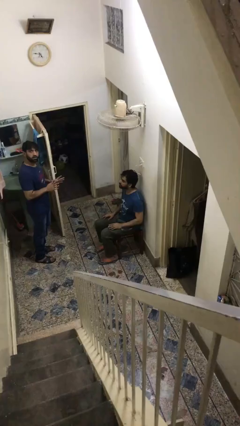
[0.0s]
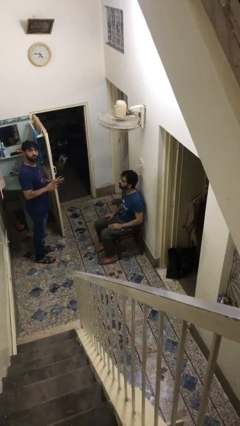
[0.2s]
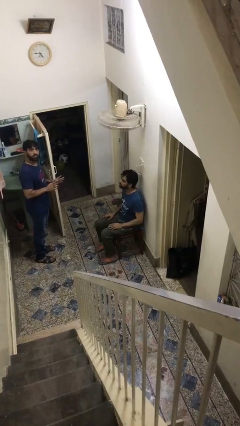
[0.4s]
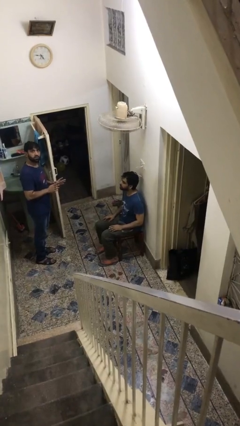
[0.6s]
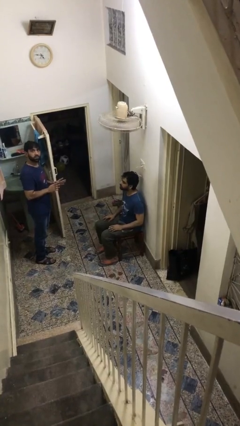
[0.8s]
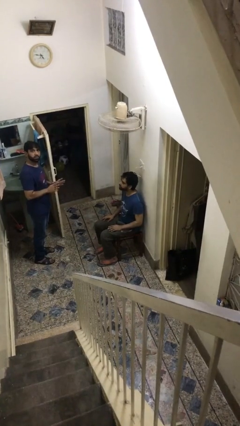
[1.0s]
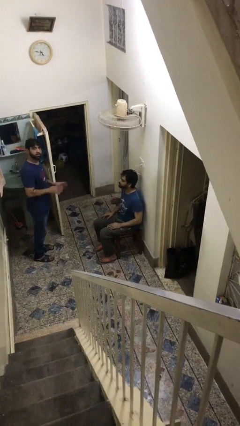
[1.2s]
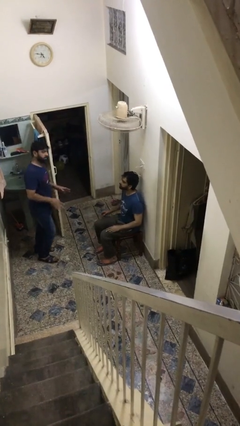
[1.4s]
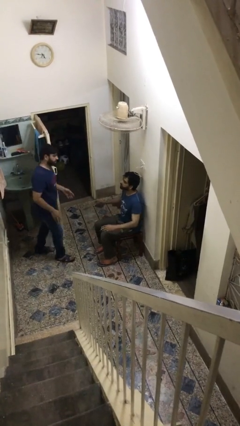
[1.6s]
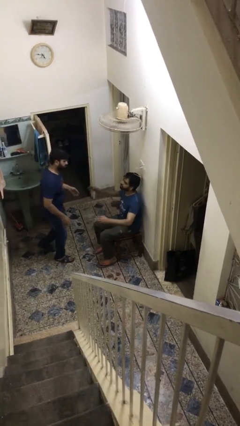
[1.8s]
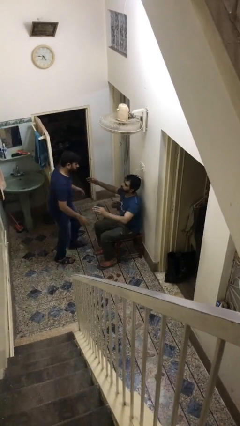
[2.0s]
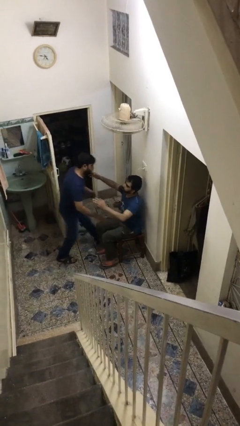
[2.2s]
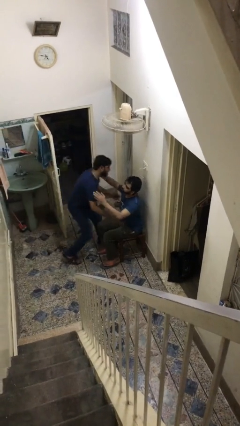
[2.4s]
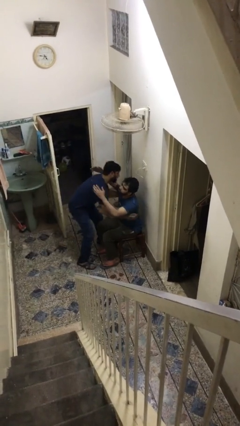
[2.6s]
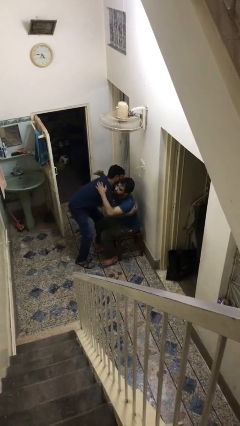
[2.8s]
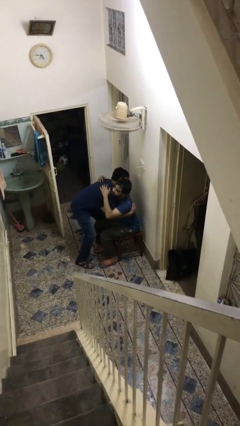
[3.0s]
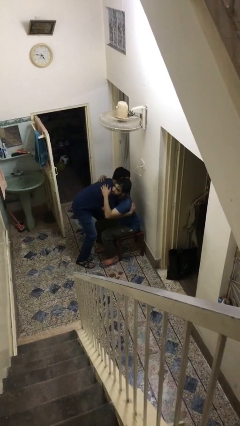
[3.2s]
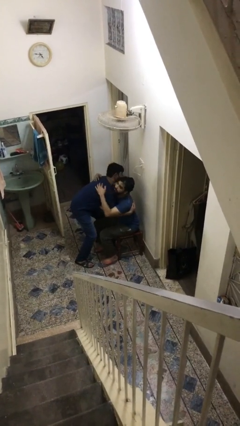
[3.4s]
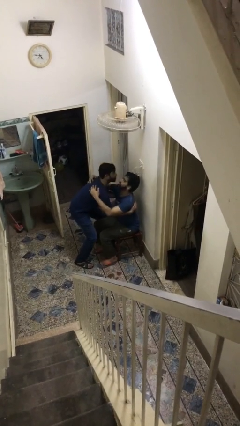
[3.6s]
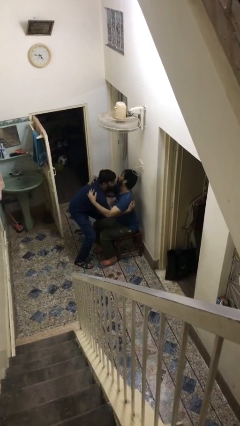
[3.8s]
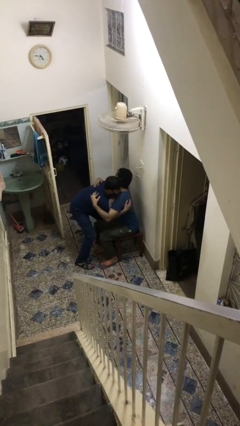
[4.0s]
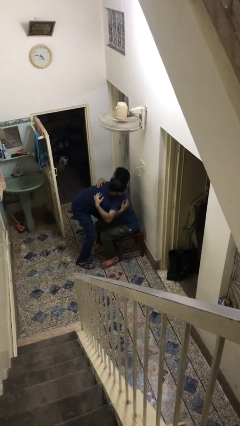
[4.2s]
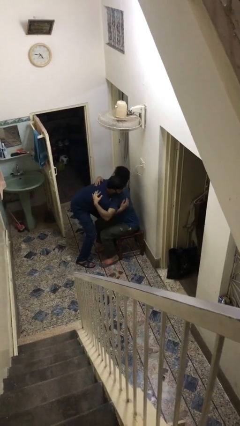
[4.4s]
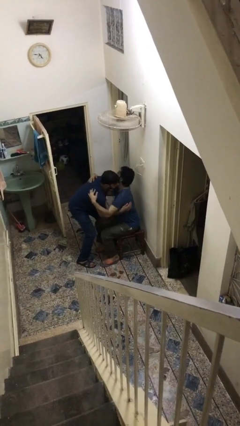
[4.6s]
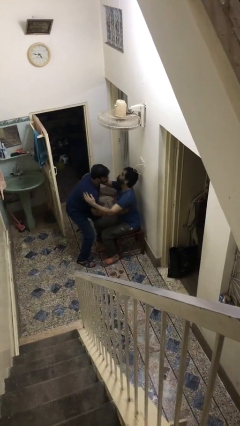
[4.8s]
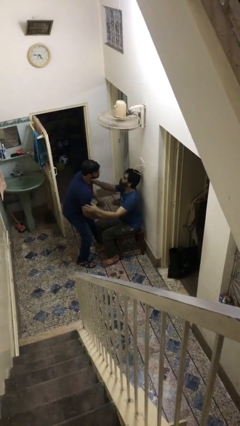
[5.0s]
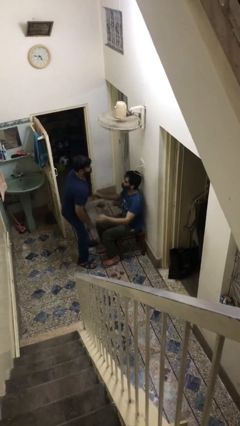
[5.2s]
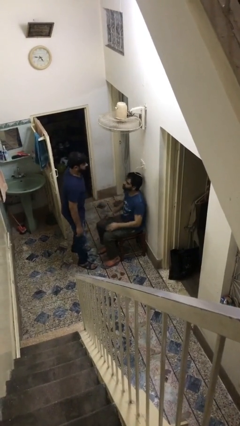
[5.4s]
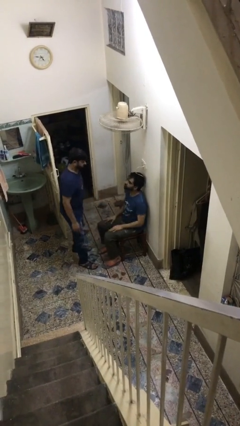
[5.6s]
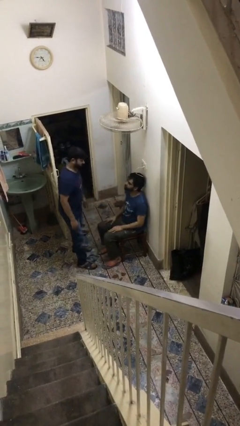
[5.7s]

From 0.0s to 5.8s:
person embraces person

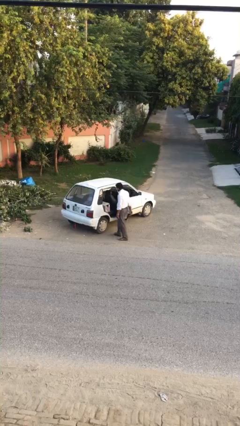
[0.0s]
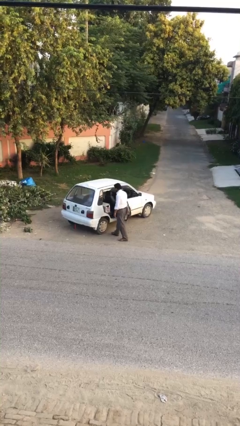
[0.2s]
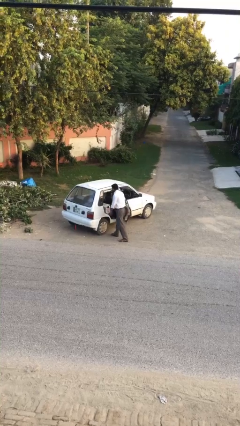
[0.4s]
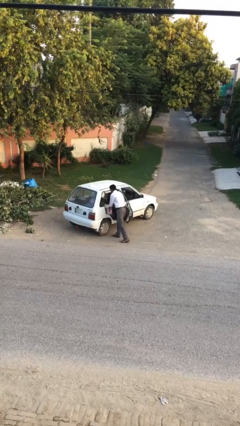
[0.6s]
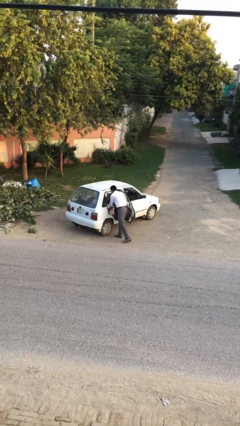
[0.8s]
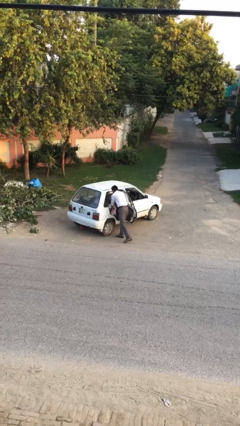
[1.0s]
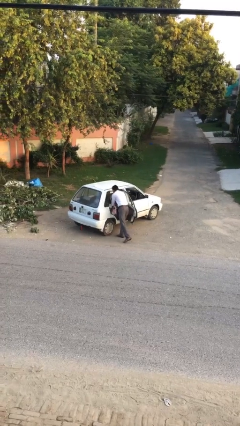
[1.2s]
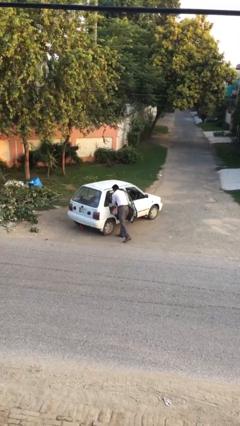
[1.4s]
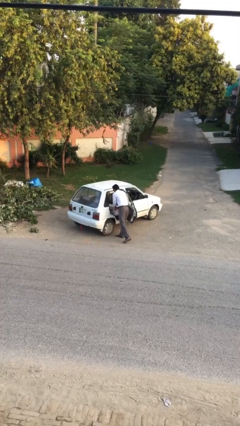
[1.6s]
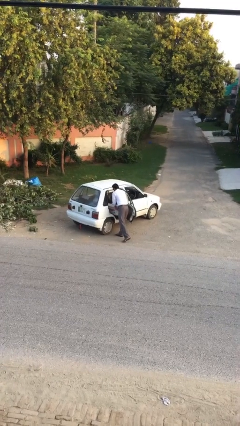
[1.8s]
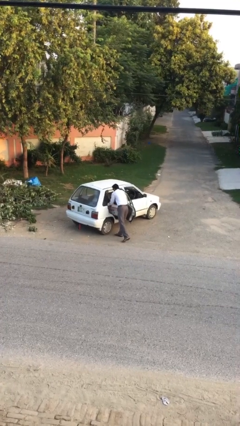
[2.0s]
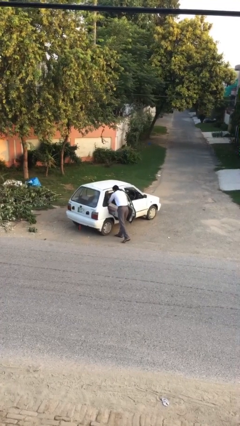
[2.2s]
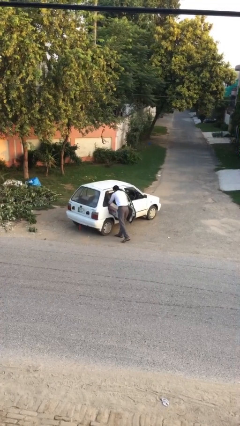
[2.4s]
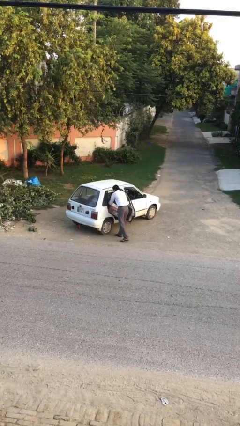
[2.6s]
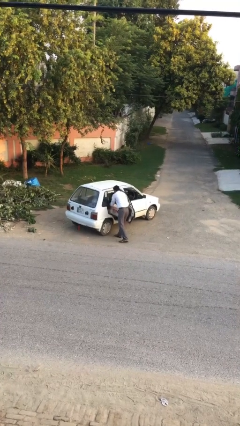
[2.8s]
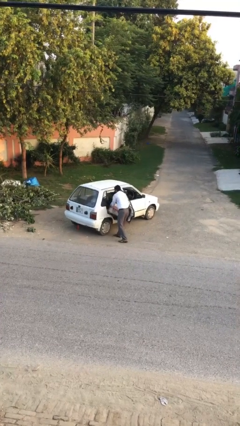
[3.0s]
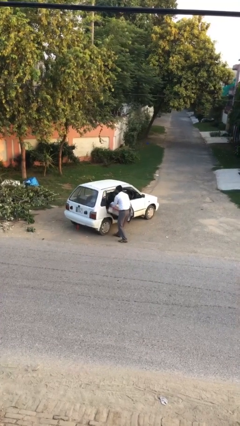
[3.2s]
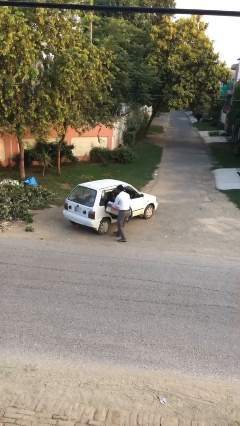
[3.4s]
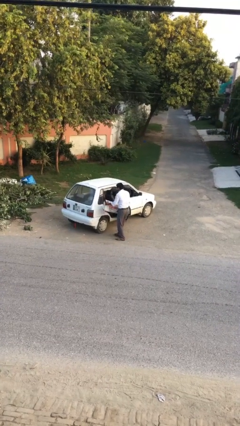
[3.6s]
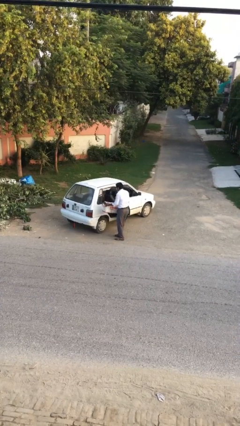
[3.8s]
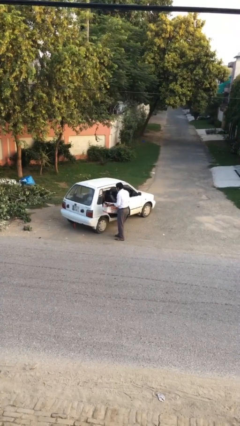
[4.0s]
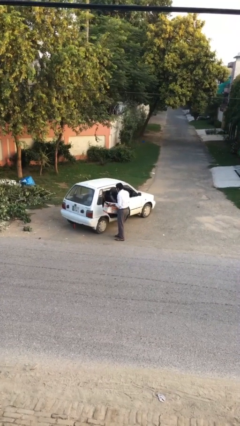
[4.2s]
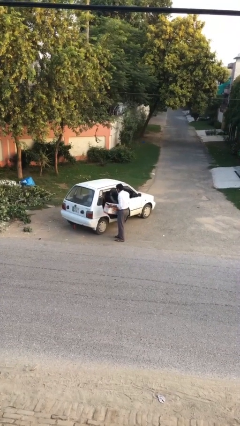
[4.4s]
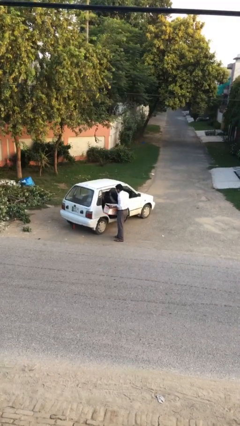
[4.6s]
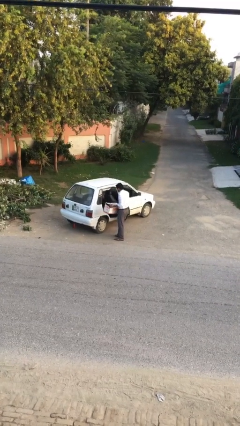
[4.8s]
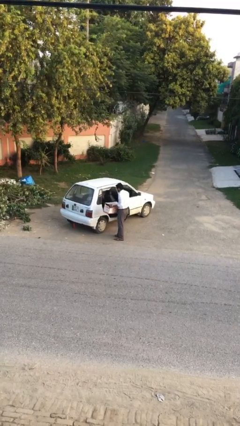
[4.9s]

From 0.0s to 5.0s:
person unloads car

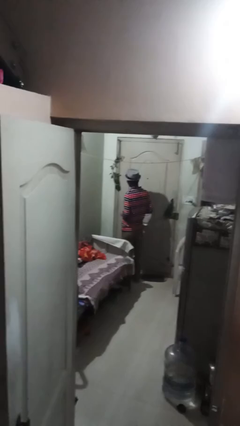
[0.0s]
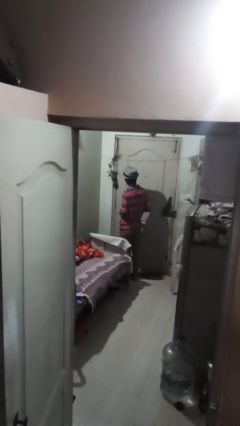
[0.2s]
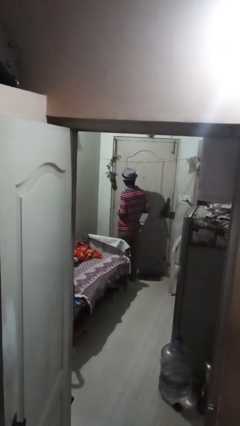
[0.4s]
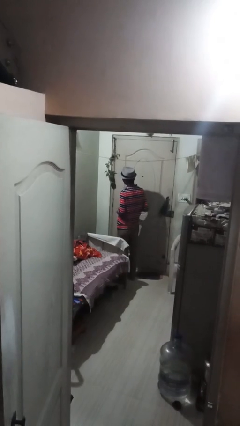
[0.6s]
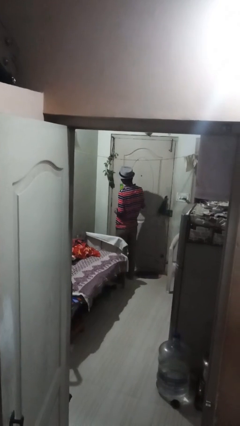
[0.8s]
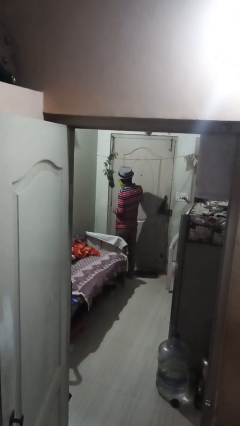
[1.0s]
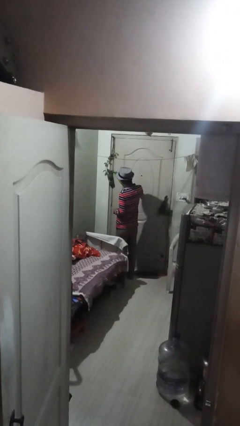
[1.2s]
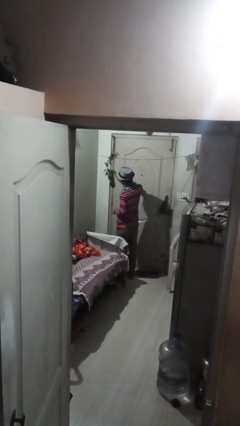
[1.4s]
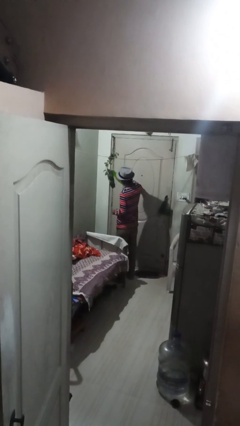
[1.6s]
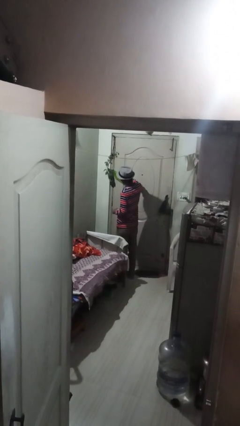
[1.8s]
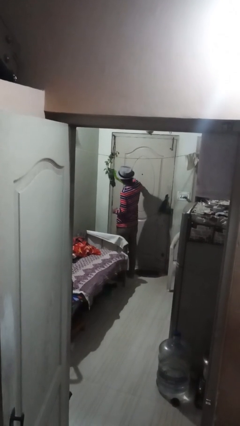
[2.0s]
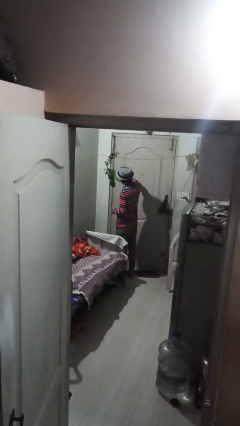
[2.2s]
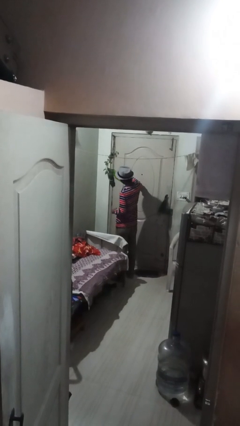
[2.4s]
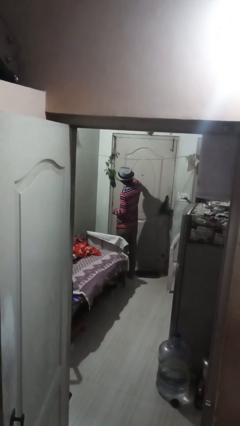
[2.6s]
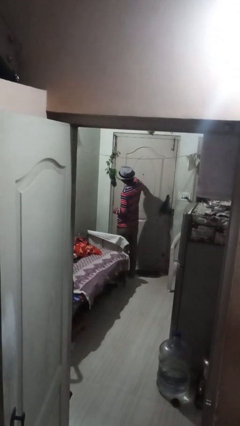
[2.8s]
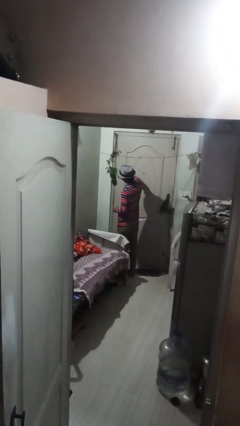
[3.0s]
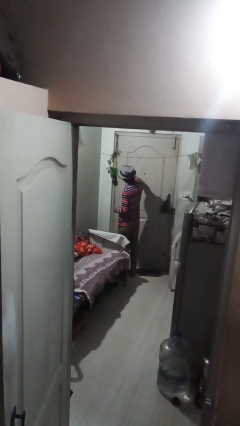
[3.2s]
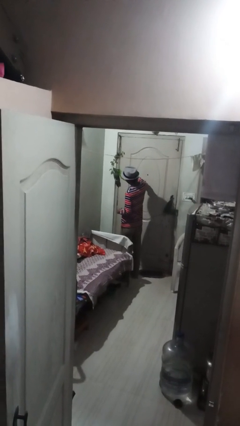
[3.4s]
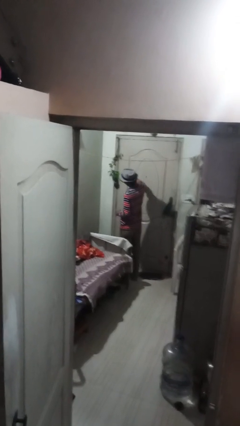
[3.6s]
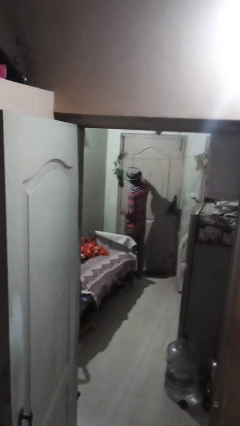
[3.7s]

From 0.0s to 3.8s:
person waters houseplant

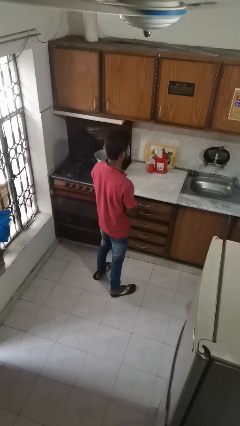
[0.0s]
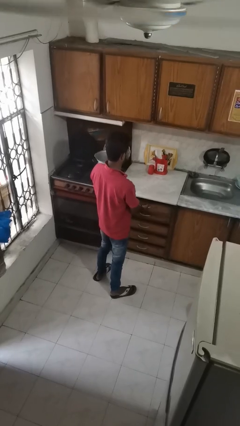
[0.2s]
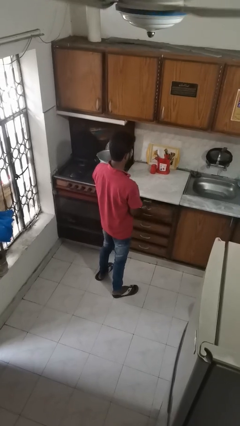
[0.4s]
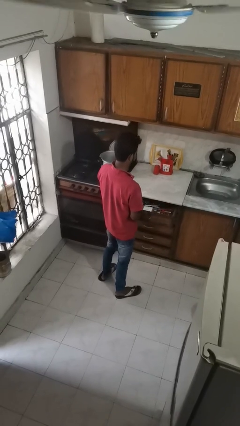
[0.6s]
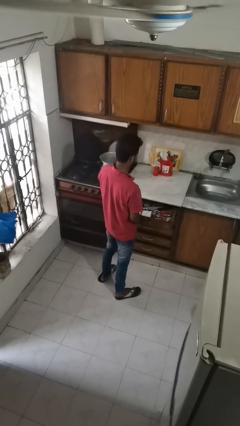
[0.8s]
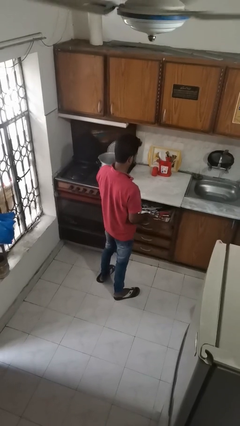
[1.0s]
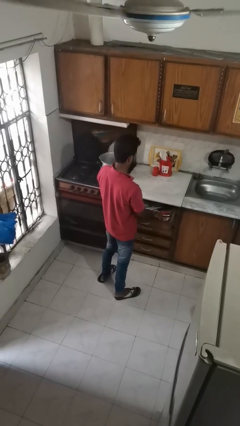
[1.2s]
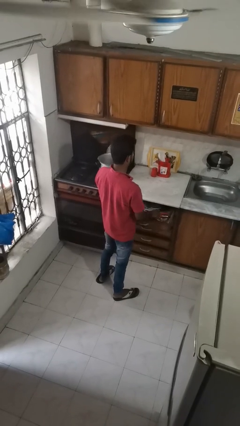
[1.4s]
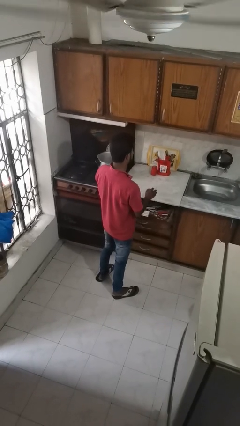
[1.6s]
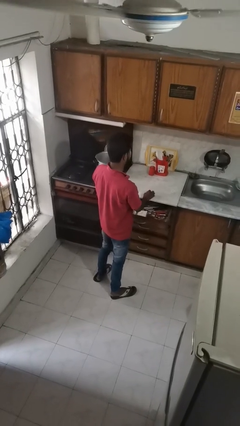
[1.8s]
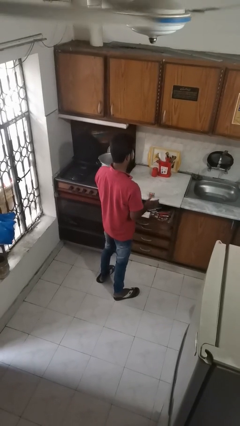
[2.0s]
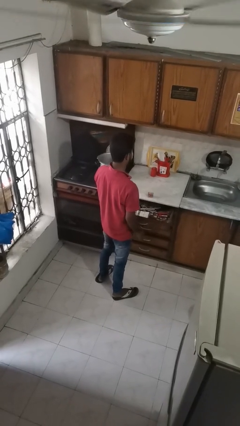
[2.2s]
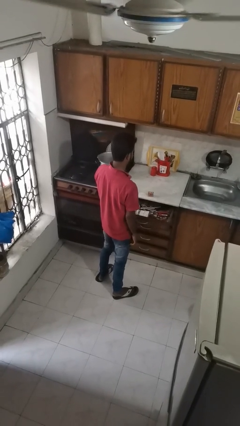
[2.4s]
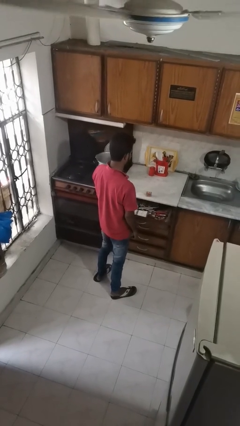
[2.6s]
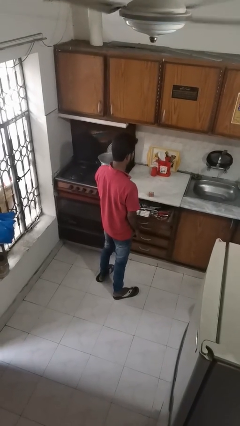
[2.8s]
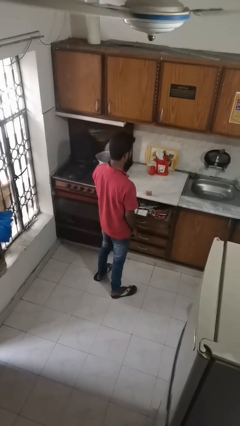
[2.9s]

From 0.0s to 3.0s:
person takes object from kitchen drawer

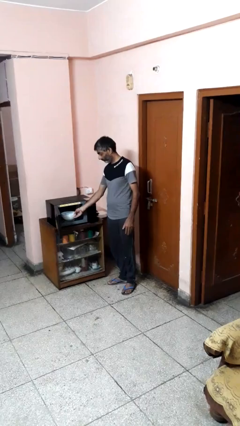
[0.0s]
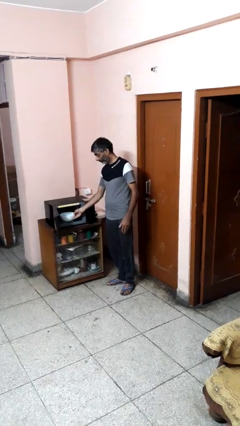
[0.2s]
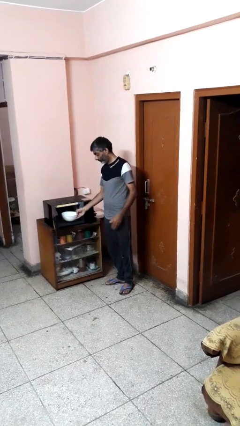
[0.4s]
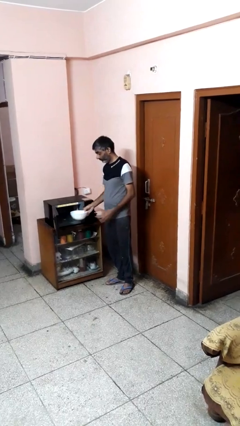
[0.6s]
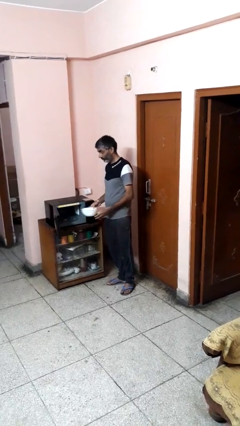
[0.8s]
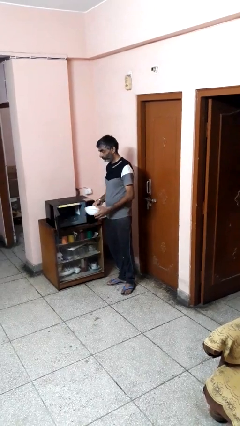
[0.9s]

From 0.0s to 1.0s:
person takes object from microwave
